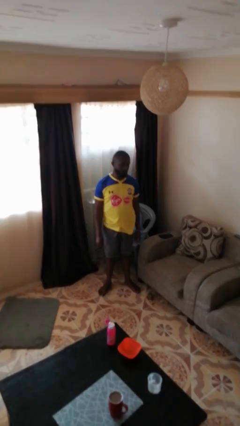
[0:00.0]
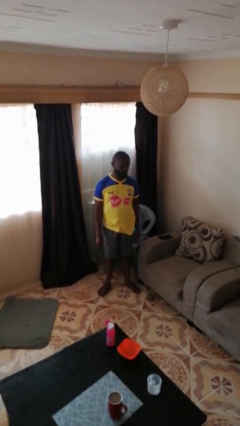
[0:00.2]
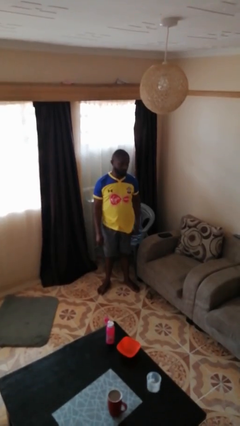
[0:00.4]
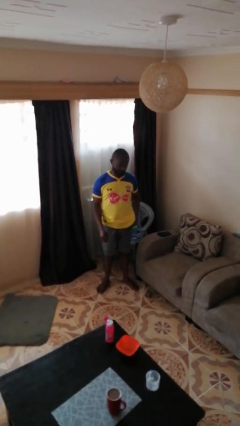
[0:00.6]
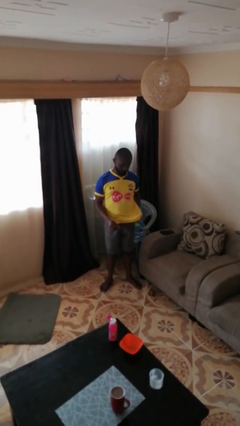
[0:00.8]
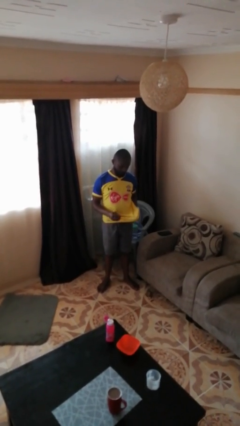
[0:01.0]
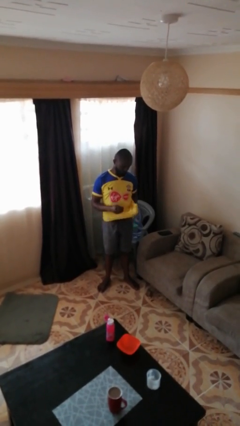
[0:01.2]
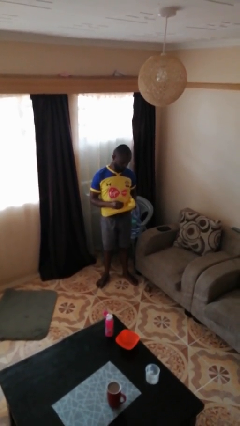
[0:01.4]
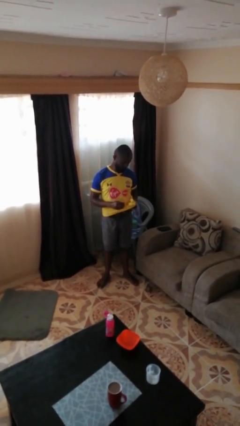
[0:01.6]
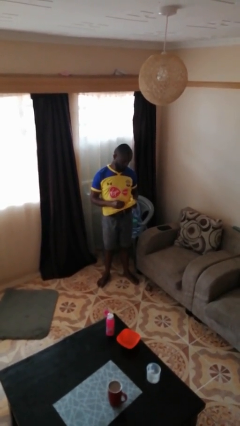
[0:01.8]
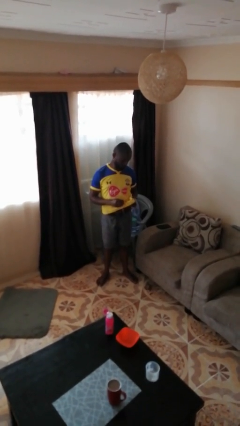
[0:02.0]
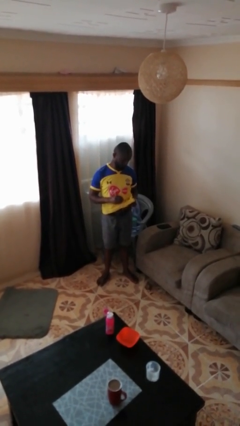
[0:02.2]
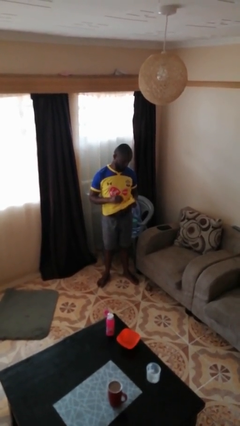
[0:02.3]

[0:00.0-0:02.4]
person cleans eyeglasses

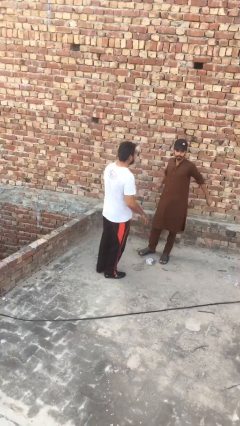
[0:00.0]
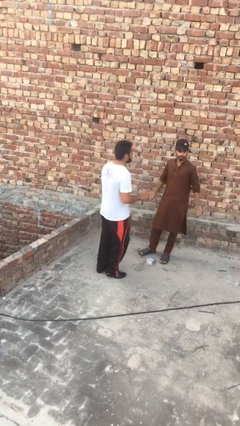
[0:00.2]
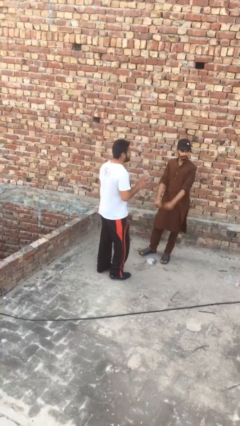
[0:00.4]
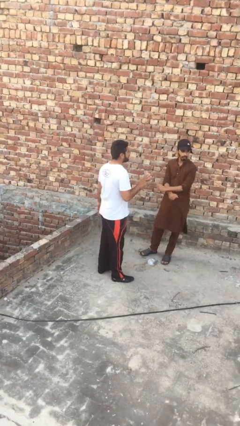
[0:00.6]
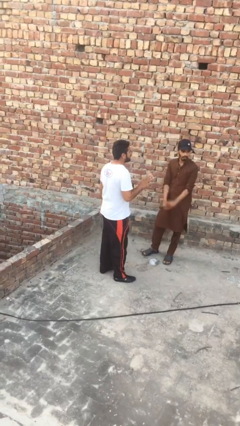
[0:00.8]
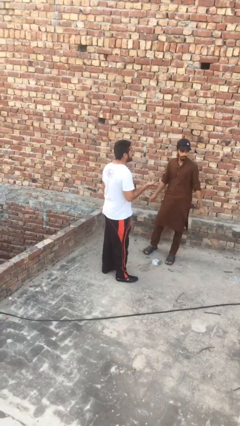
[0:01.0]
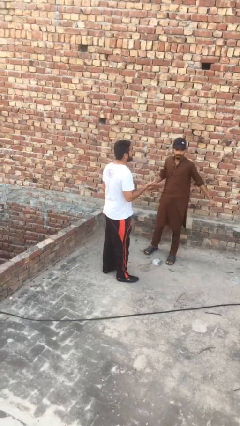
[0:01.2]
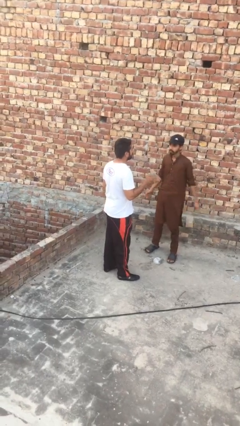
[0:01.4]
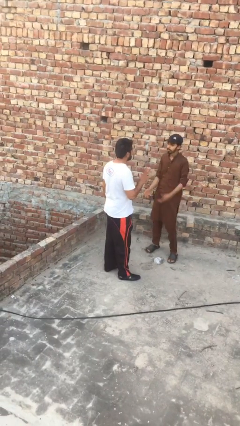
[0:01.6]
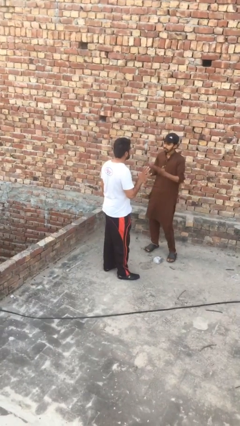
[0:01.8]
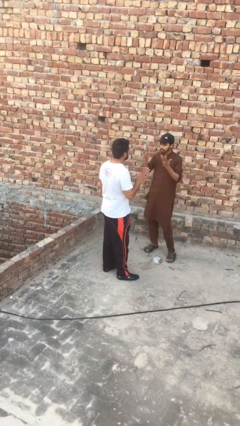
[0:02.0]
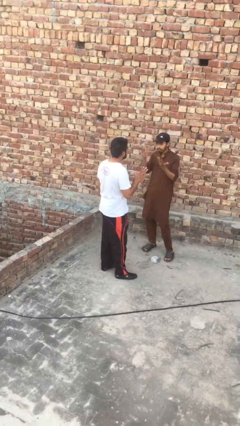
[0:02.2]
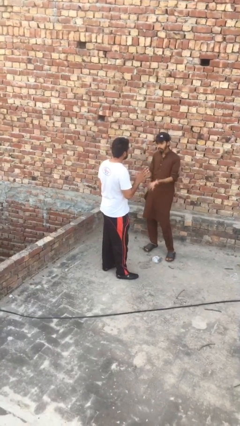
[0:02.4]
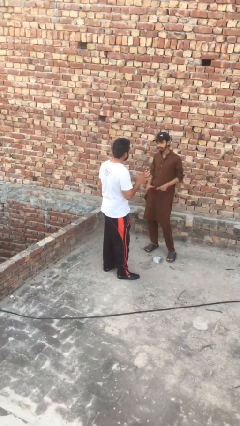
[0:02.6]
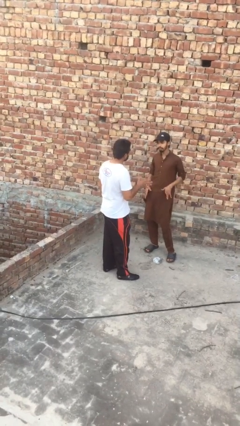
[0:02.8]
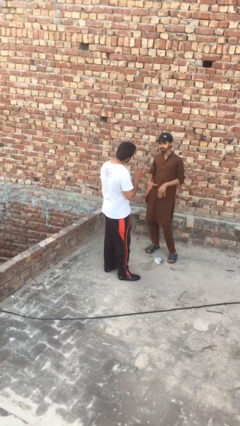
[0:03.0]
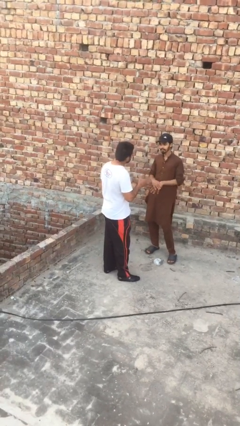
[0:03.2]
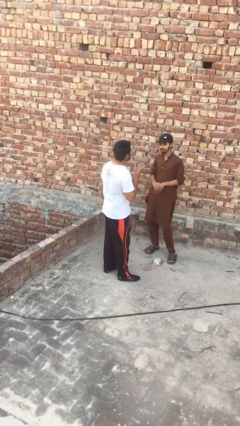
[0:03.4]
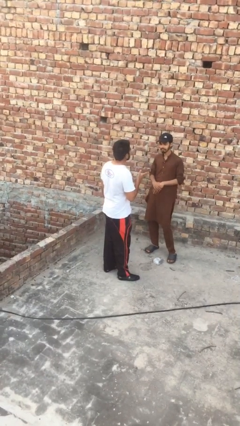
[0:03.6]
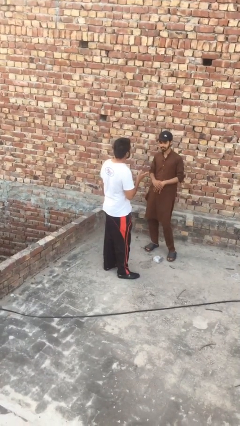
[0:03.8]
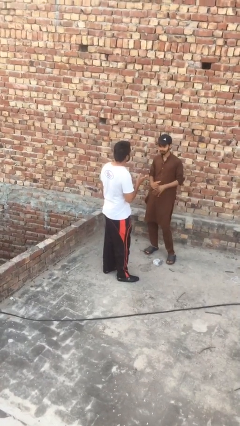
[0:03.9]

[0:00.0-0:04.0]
person talks to person

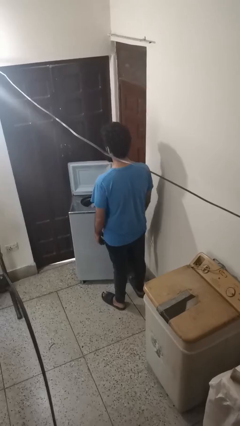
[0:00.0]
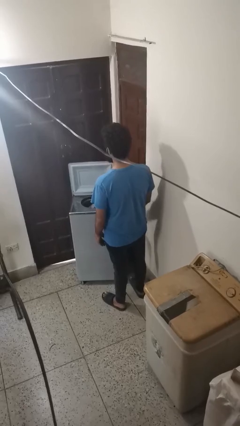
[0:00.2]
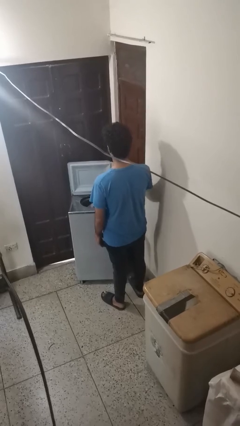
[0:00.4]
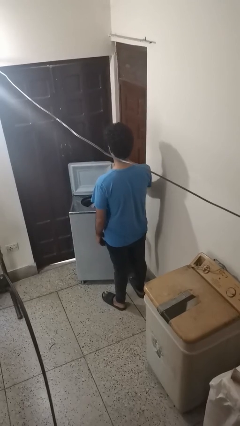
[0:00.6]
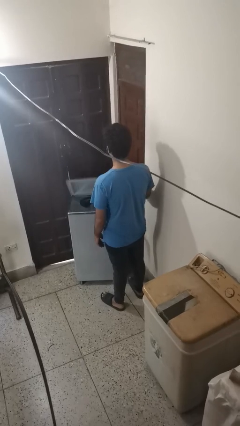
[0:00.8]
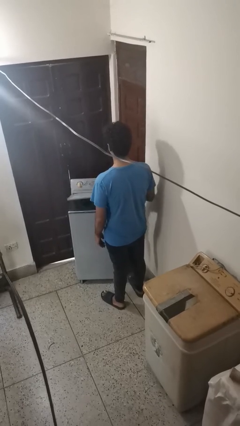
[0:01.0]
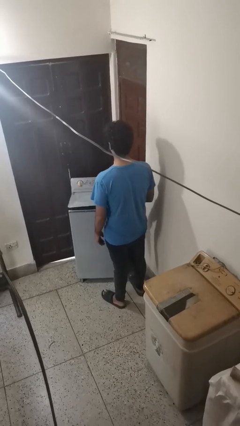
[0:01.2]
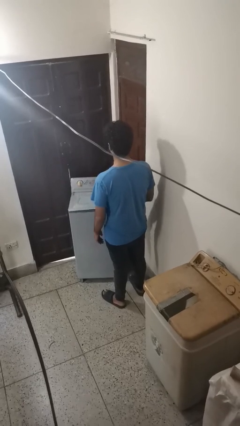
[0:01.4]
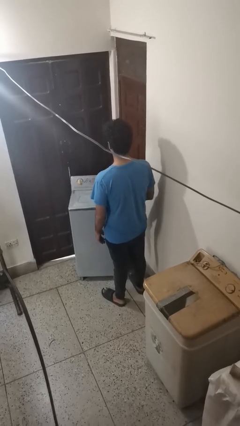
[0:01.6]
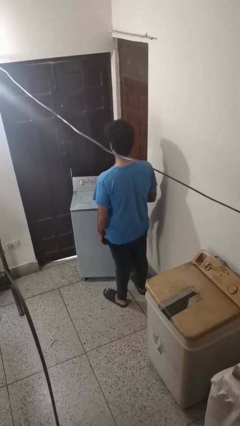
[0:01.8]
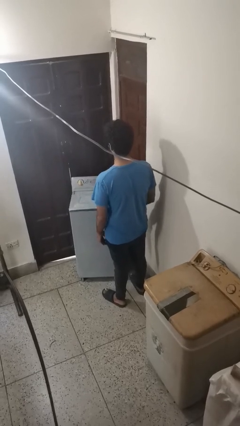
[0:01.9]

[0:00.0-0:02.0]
person closes clothes washer

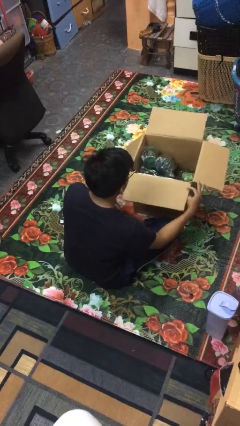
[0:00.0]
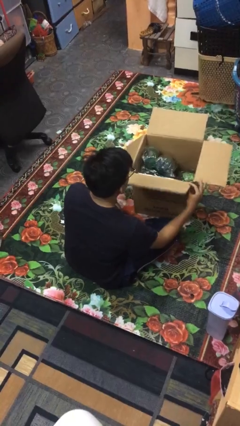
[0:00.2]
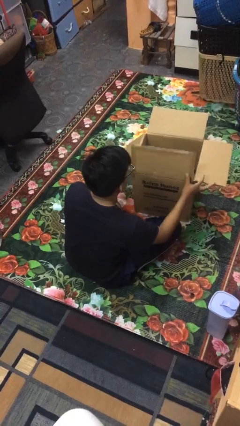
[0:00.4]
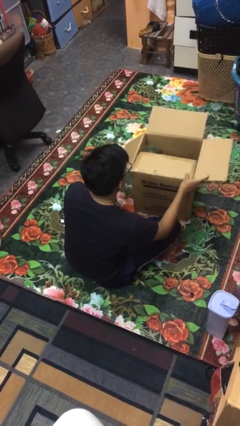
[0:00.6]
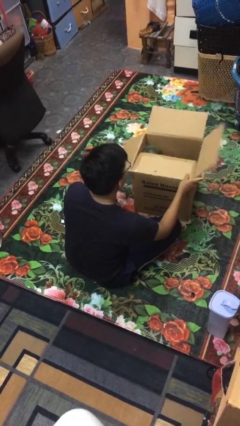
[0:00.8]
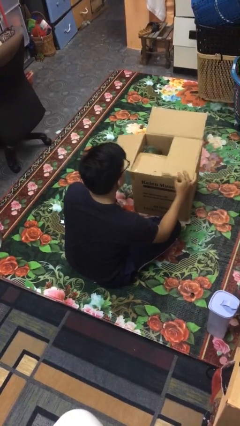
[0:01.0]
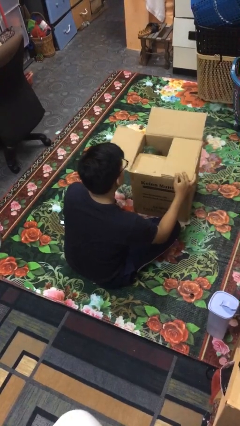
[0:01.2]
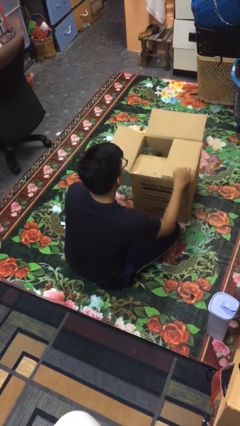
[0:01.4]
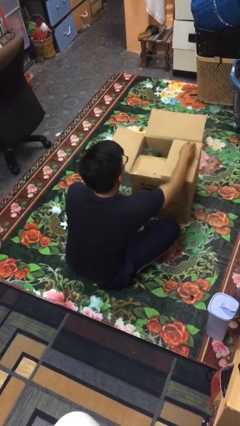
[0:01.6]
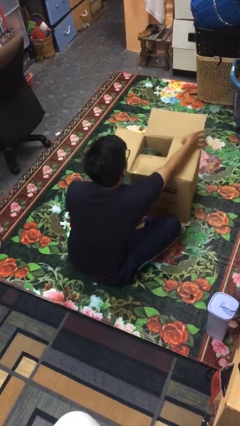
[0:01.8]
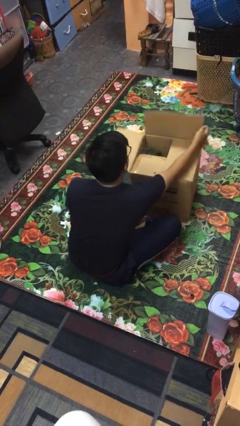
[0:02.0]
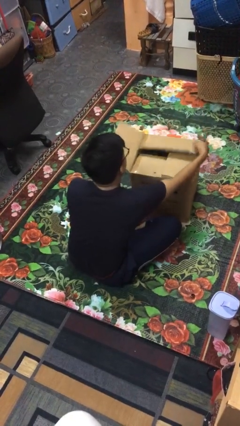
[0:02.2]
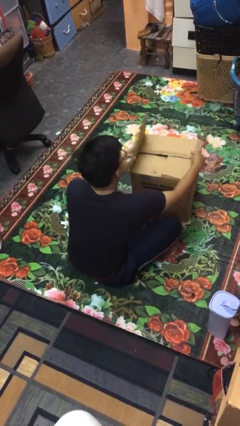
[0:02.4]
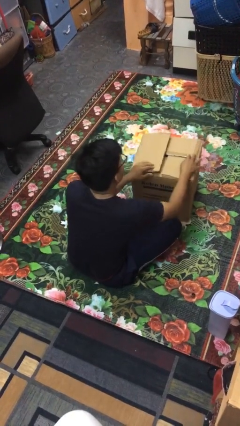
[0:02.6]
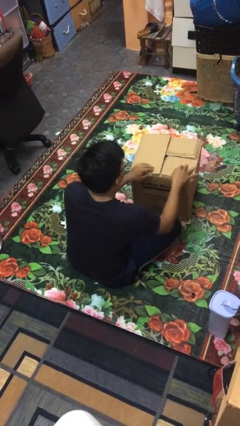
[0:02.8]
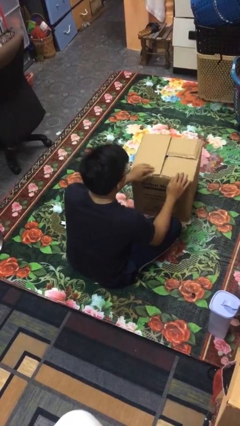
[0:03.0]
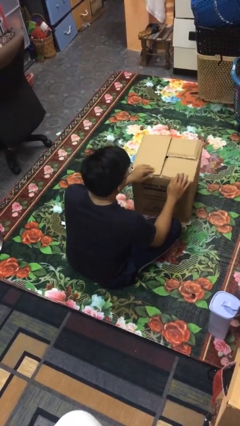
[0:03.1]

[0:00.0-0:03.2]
person closes box

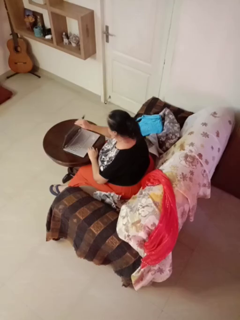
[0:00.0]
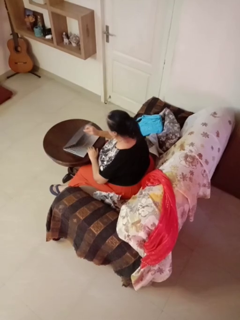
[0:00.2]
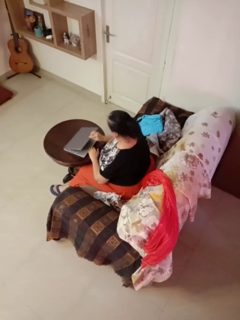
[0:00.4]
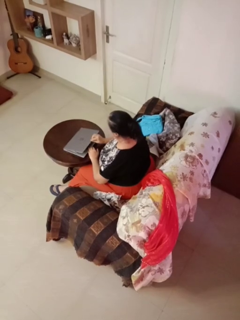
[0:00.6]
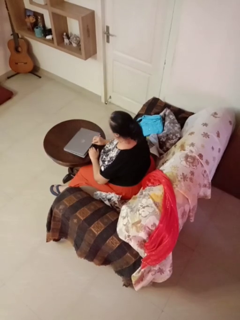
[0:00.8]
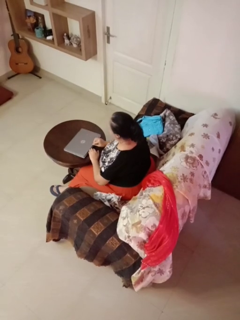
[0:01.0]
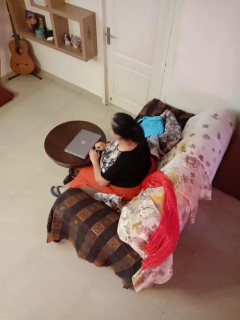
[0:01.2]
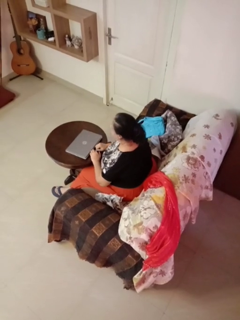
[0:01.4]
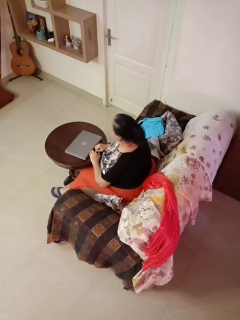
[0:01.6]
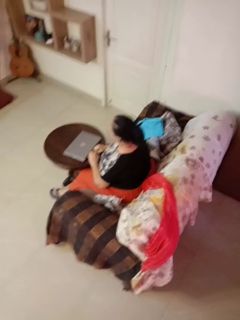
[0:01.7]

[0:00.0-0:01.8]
person closes laptop

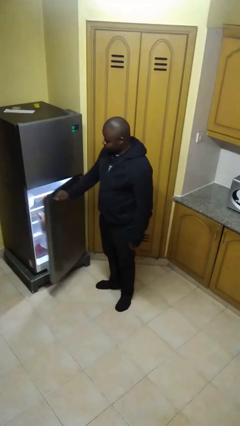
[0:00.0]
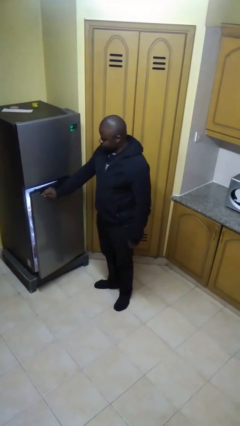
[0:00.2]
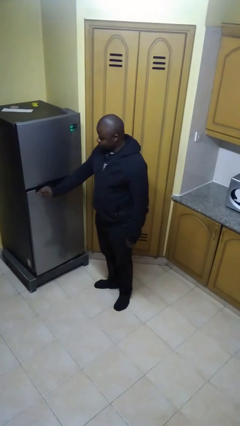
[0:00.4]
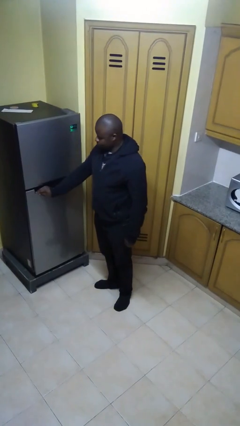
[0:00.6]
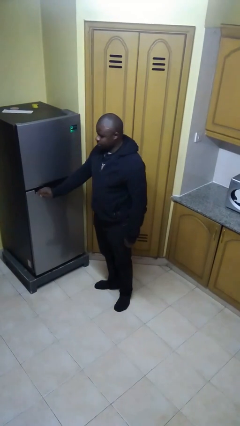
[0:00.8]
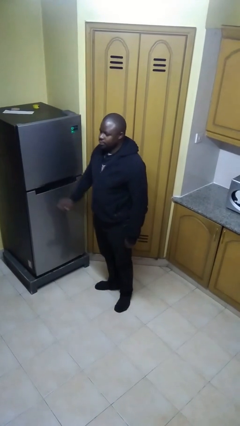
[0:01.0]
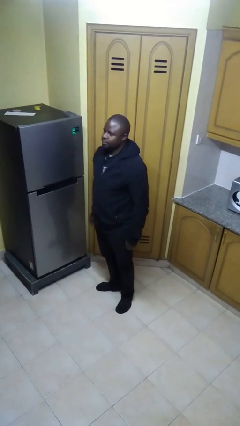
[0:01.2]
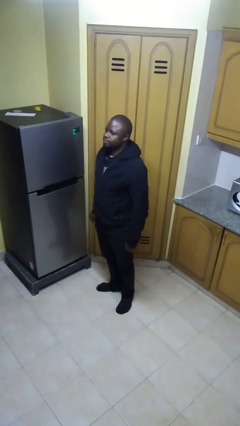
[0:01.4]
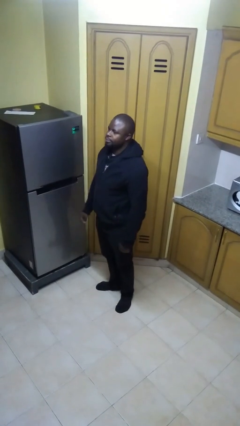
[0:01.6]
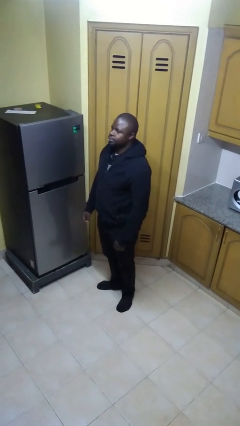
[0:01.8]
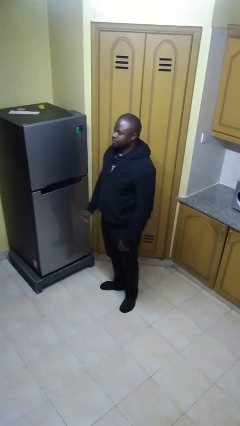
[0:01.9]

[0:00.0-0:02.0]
person closes refrigerator

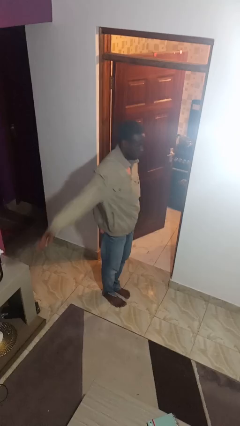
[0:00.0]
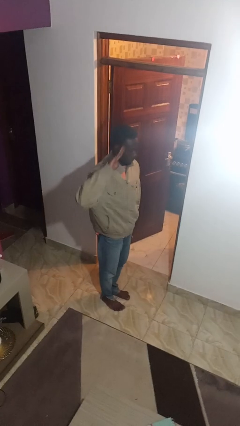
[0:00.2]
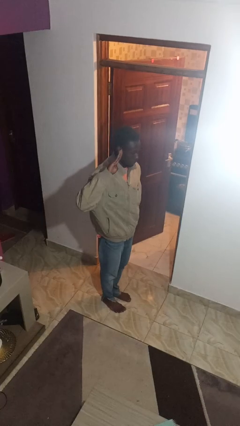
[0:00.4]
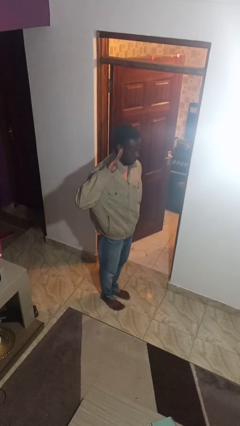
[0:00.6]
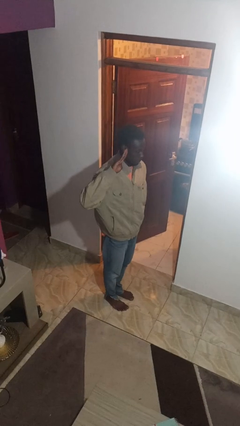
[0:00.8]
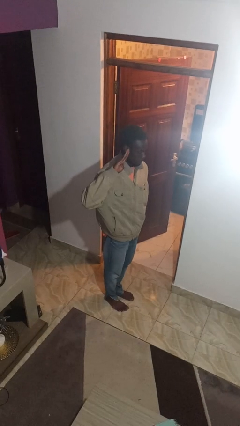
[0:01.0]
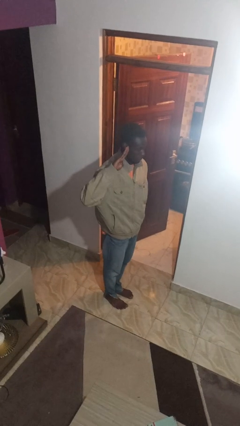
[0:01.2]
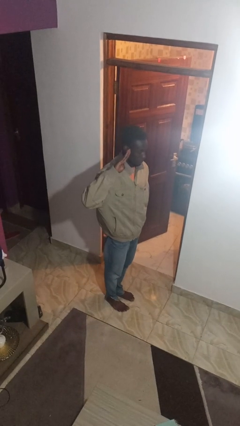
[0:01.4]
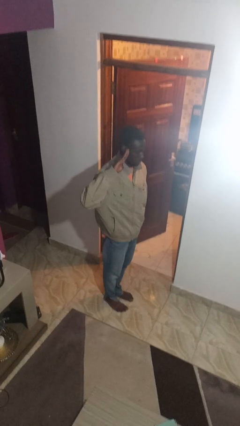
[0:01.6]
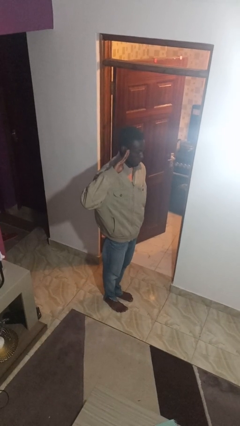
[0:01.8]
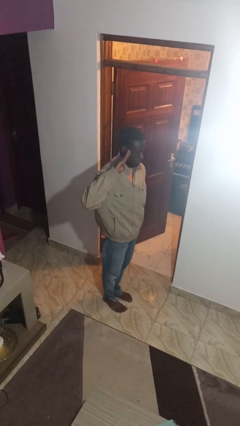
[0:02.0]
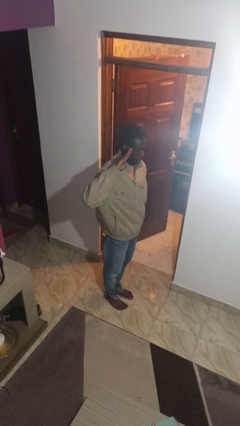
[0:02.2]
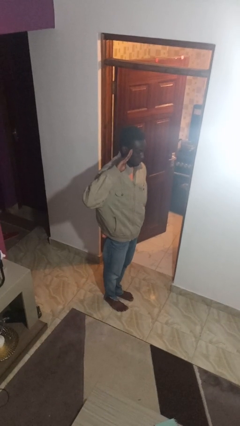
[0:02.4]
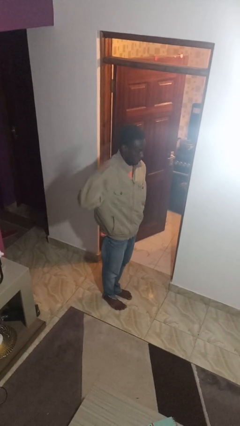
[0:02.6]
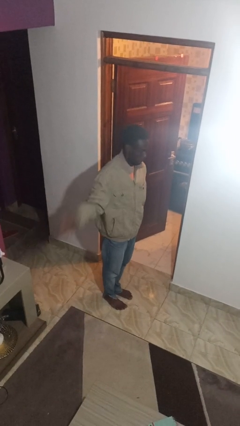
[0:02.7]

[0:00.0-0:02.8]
person salutes
